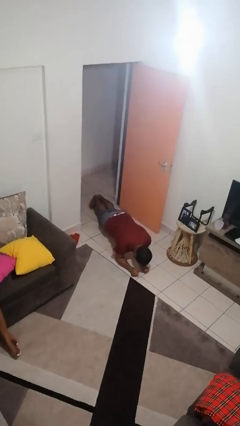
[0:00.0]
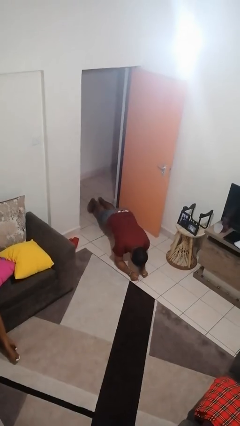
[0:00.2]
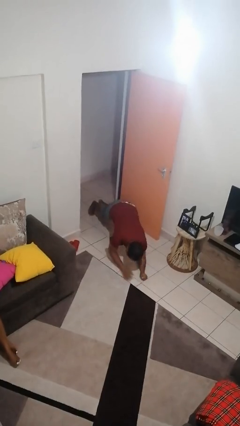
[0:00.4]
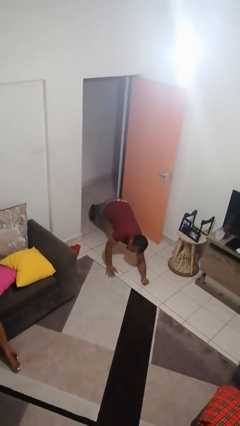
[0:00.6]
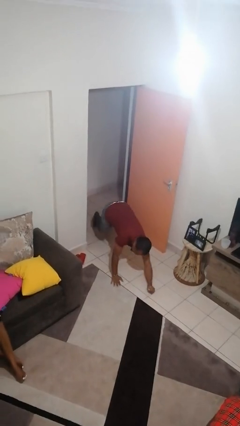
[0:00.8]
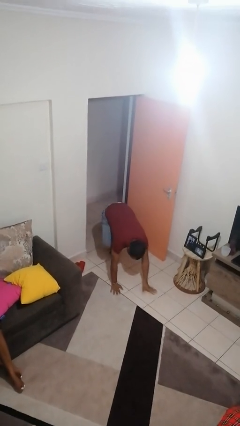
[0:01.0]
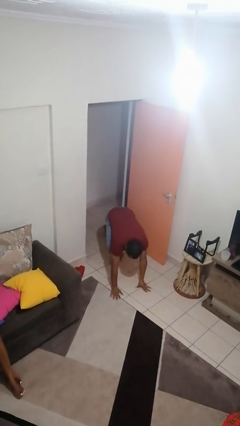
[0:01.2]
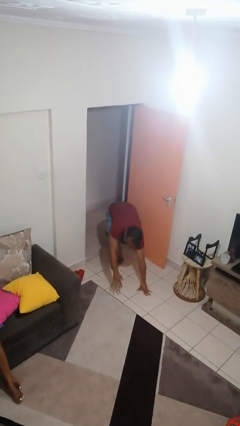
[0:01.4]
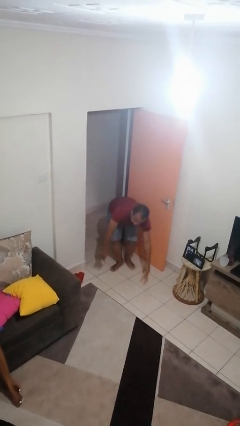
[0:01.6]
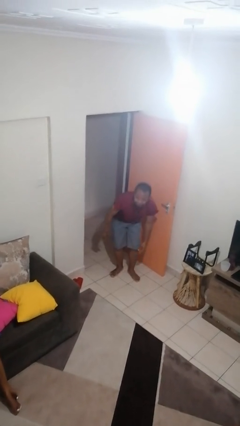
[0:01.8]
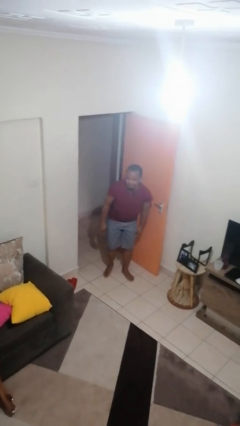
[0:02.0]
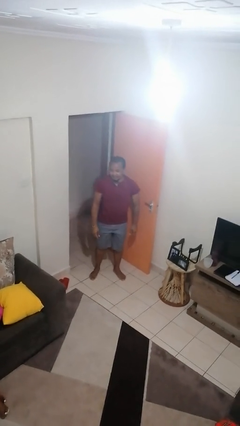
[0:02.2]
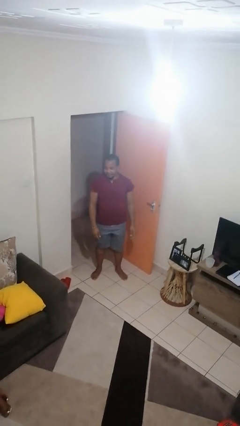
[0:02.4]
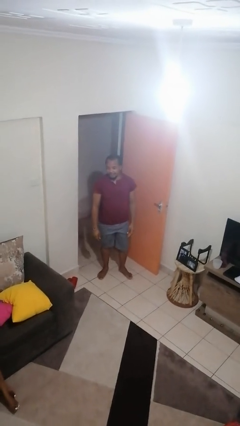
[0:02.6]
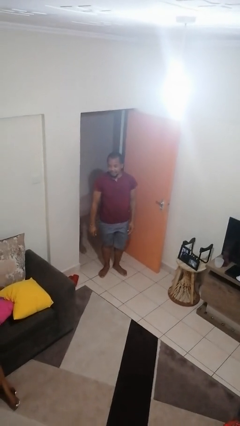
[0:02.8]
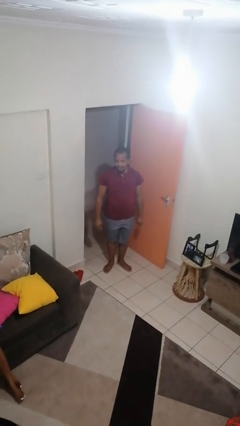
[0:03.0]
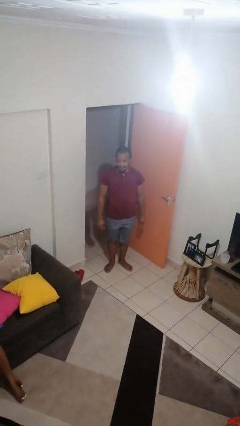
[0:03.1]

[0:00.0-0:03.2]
person stands up from floor

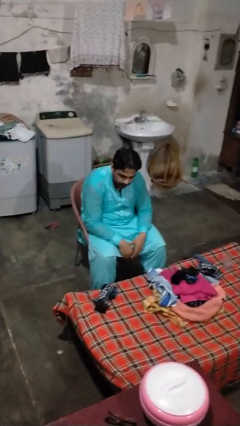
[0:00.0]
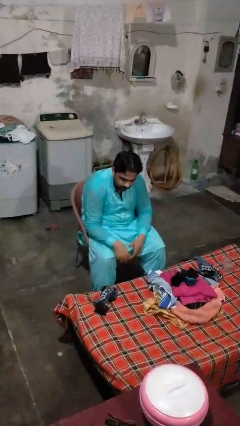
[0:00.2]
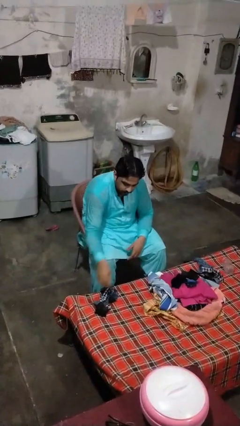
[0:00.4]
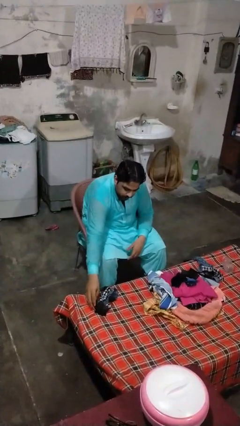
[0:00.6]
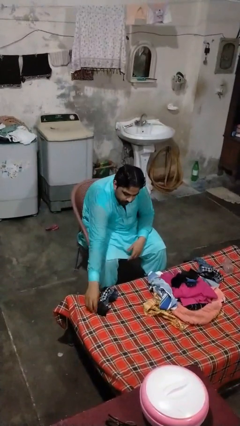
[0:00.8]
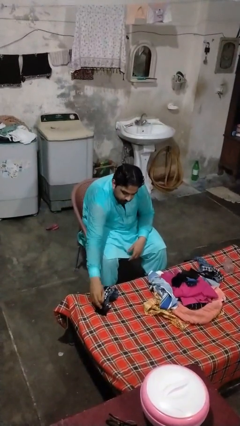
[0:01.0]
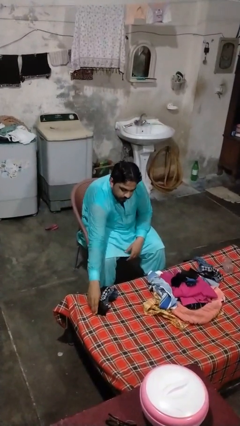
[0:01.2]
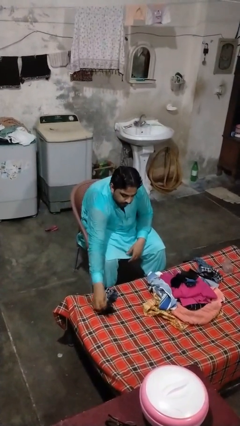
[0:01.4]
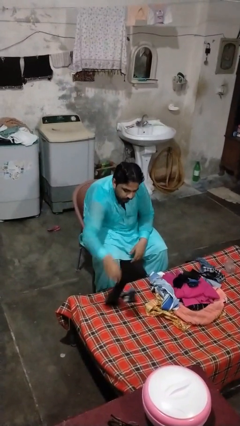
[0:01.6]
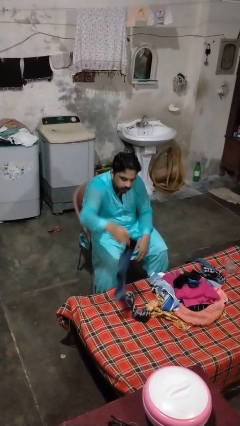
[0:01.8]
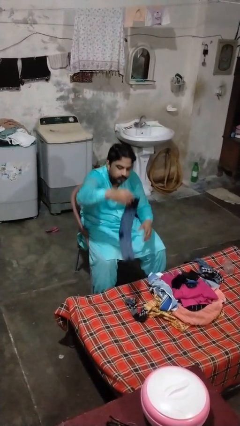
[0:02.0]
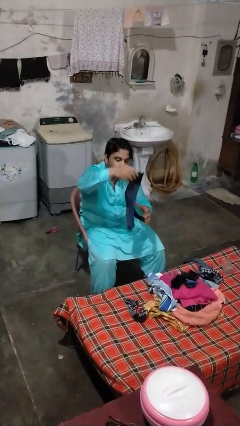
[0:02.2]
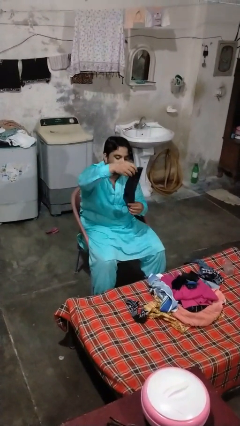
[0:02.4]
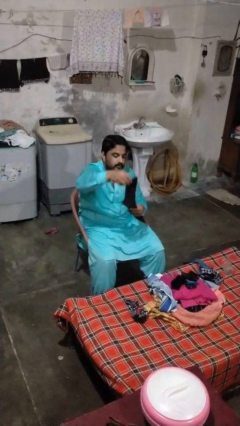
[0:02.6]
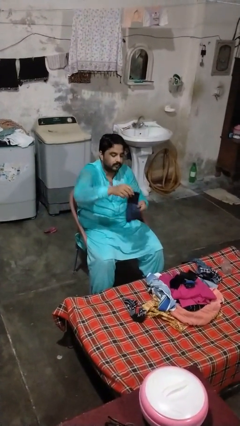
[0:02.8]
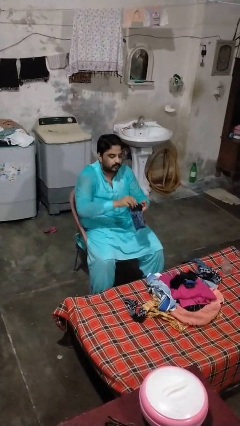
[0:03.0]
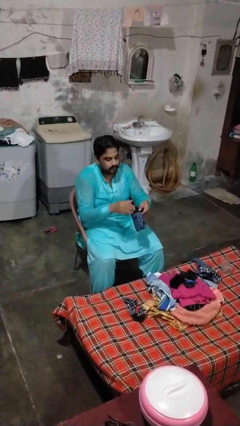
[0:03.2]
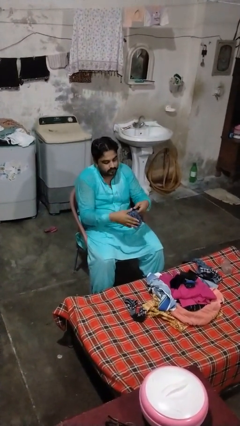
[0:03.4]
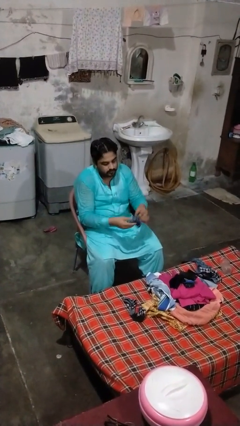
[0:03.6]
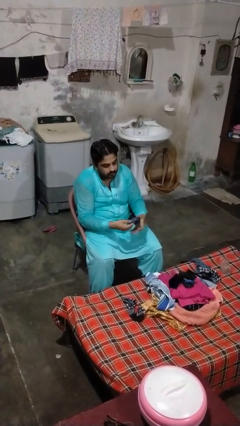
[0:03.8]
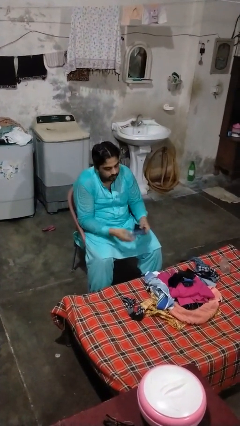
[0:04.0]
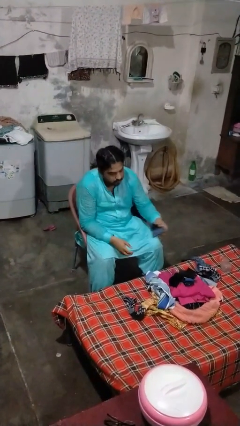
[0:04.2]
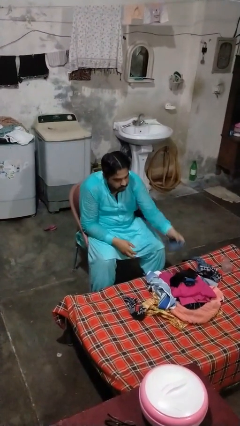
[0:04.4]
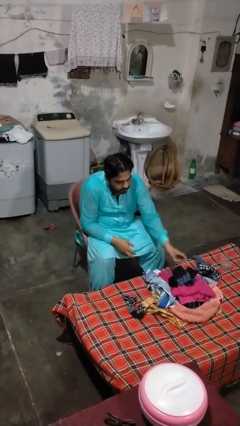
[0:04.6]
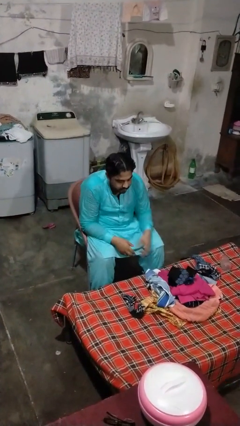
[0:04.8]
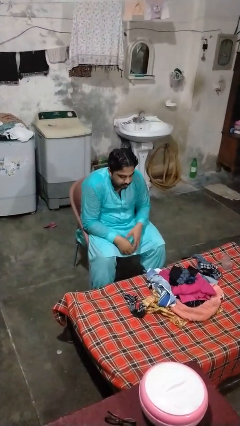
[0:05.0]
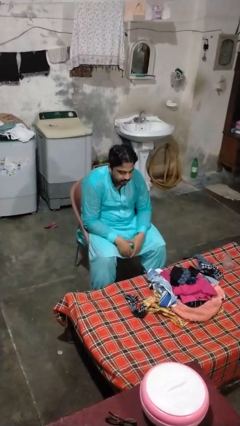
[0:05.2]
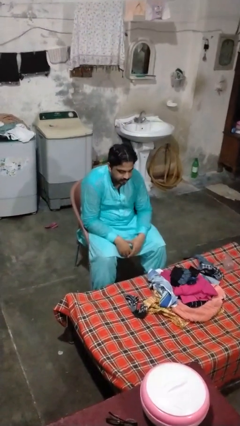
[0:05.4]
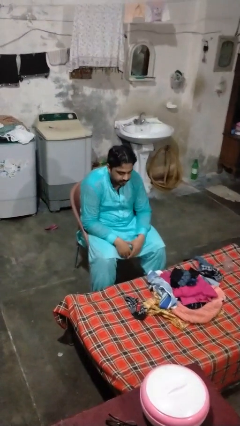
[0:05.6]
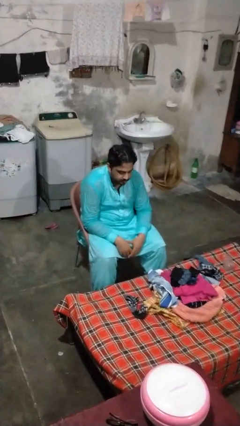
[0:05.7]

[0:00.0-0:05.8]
person folds socks

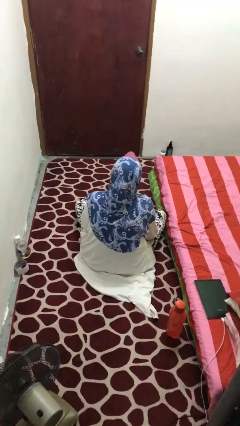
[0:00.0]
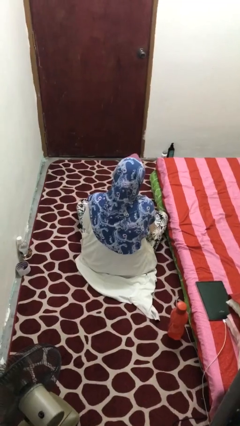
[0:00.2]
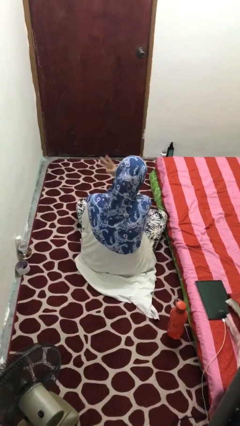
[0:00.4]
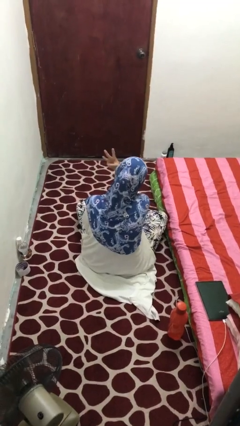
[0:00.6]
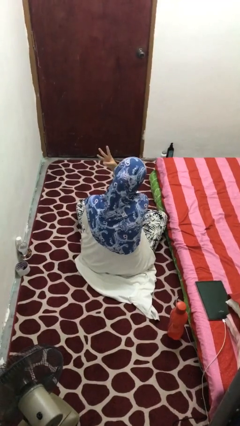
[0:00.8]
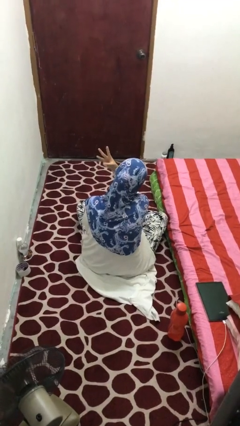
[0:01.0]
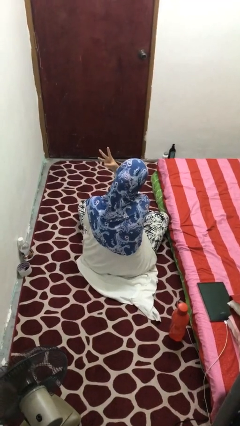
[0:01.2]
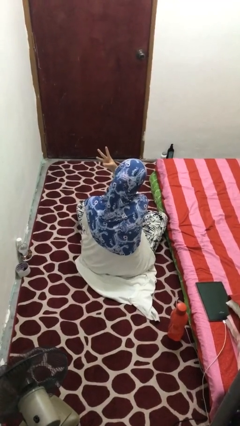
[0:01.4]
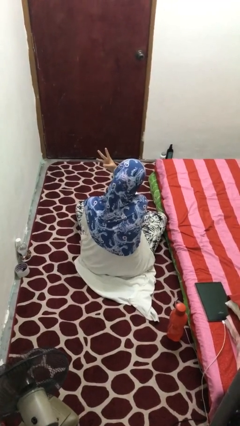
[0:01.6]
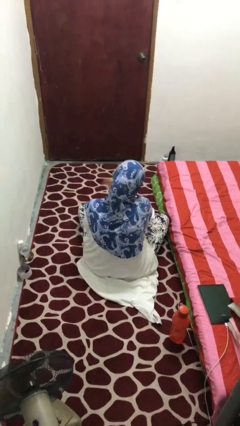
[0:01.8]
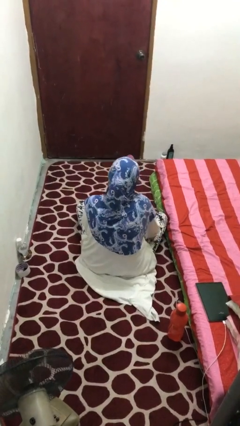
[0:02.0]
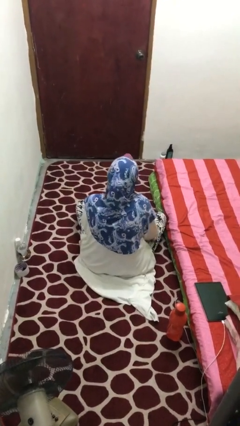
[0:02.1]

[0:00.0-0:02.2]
person gestures number three

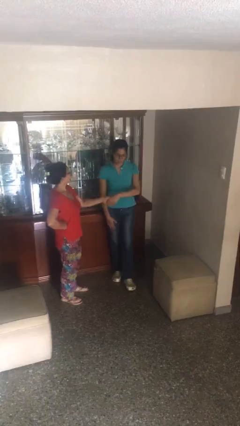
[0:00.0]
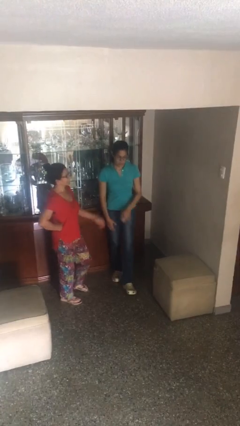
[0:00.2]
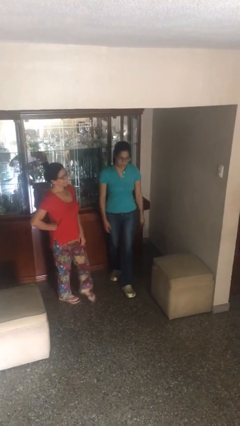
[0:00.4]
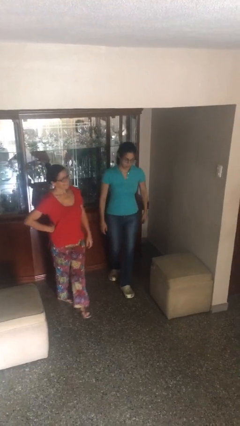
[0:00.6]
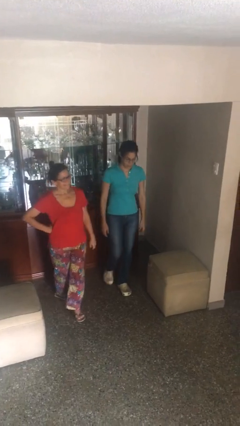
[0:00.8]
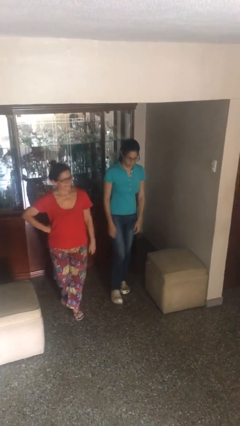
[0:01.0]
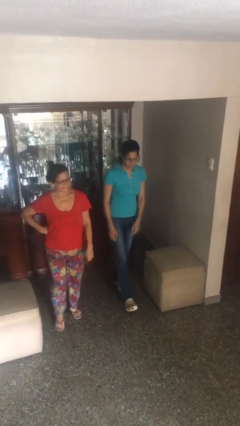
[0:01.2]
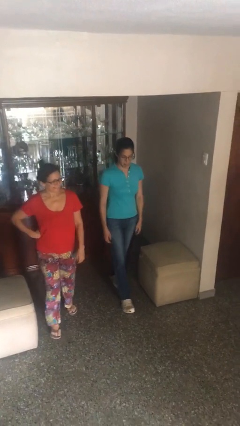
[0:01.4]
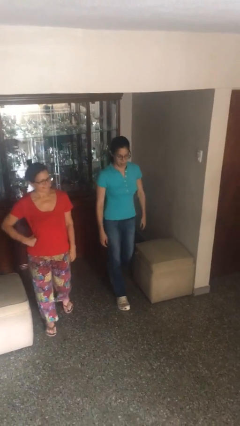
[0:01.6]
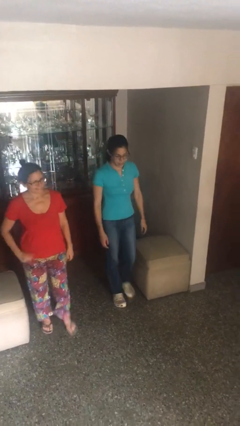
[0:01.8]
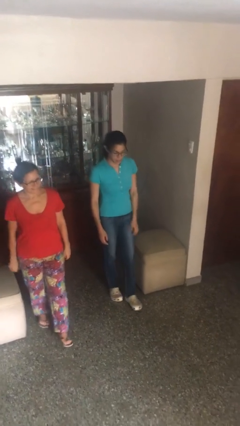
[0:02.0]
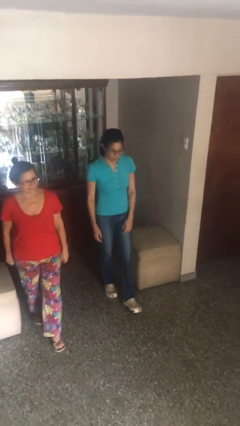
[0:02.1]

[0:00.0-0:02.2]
person talks to person

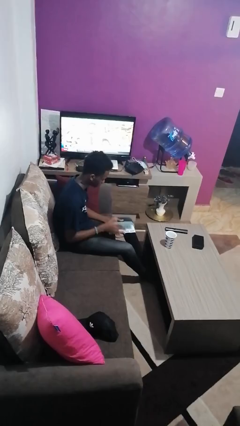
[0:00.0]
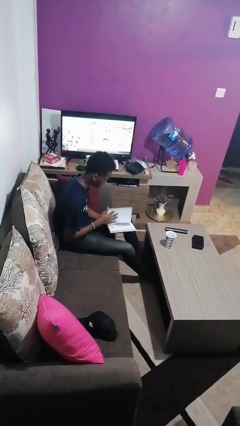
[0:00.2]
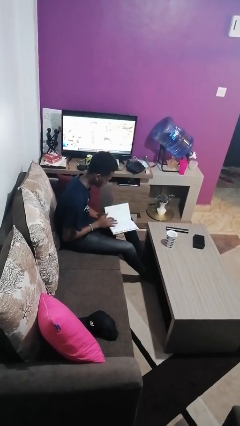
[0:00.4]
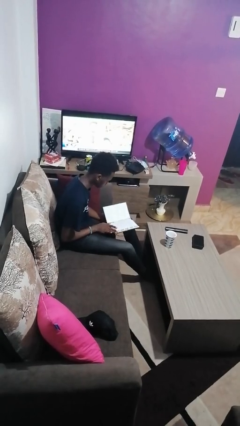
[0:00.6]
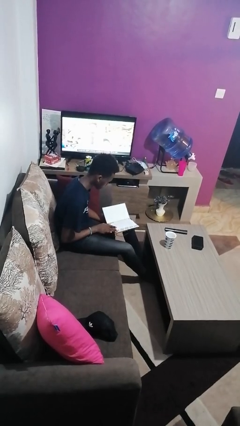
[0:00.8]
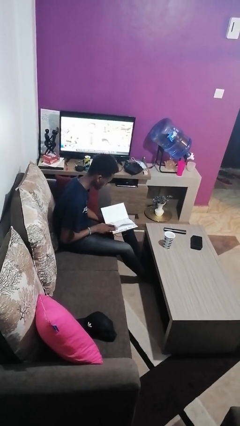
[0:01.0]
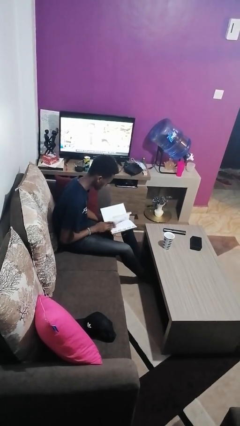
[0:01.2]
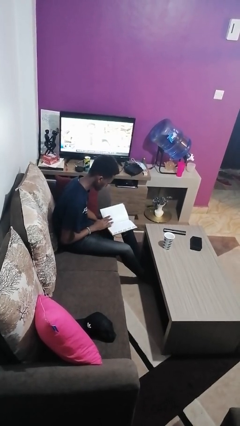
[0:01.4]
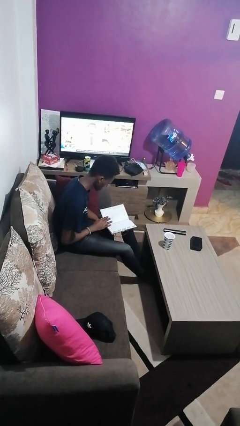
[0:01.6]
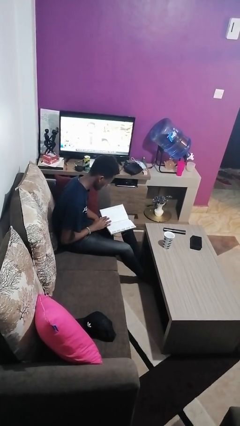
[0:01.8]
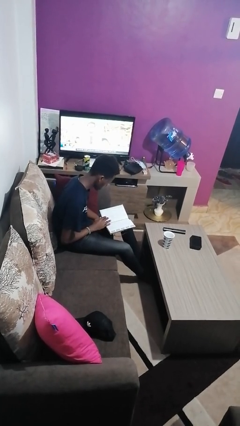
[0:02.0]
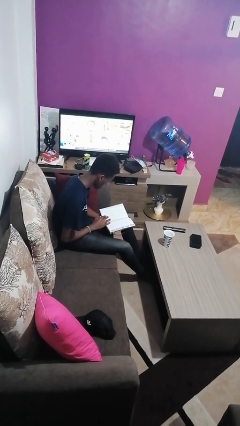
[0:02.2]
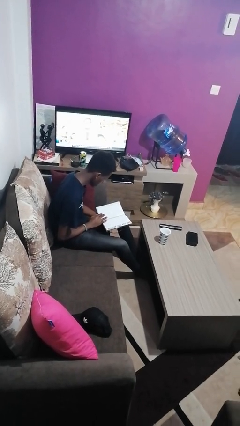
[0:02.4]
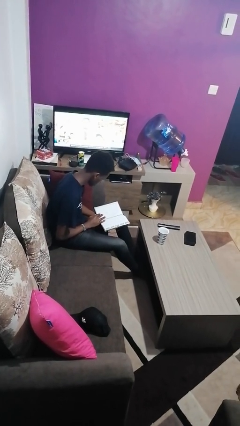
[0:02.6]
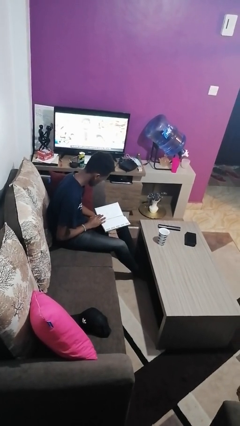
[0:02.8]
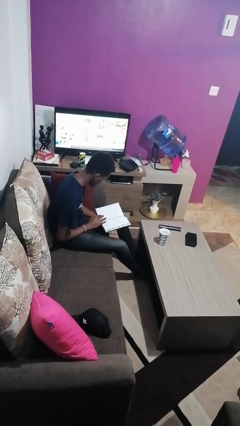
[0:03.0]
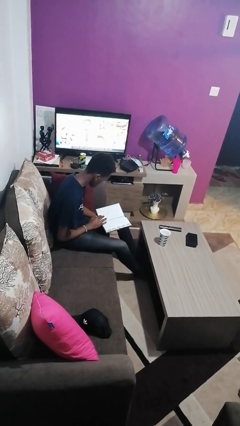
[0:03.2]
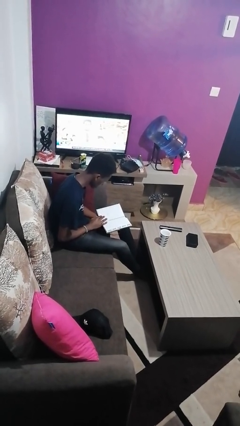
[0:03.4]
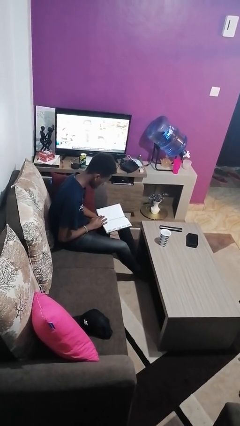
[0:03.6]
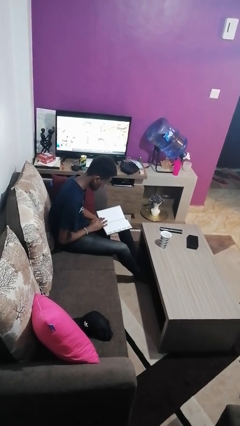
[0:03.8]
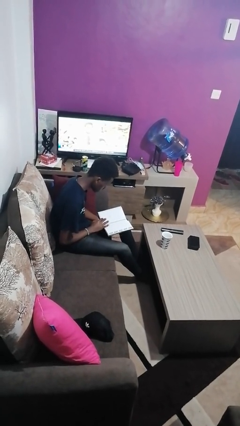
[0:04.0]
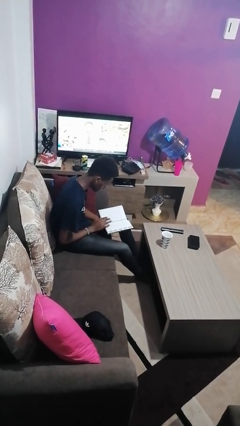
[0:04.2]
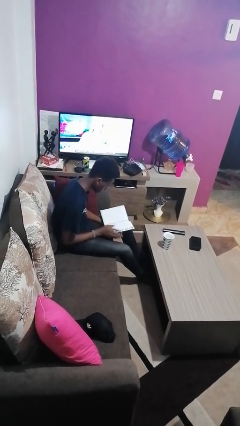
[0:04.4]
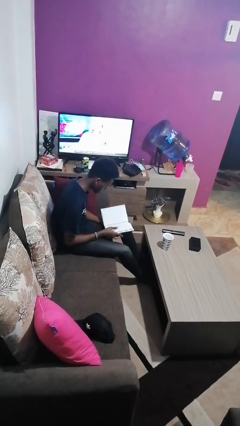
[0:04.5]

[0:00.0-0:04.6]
person reads book
